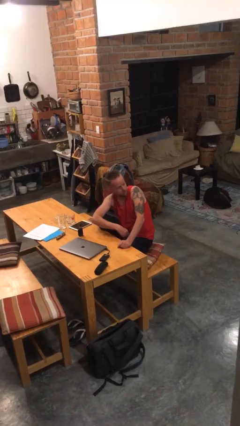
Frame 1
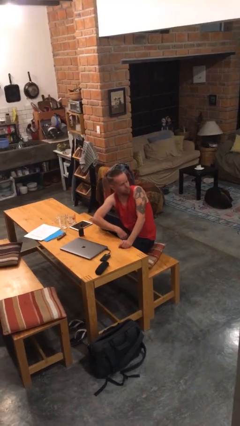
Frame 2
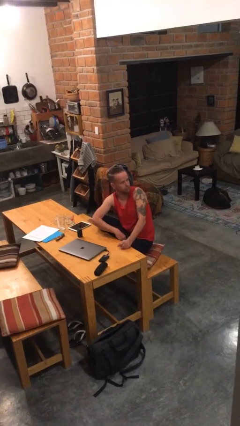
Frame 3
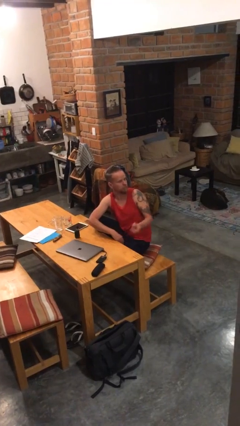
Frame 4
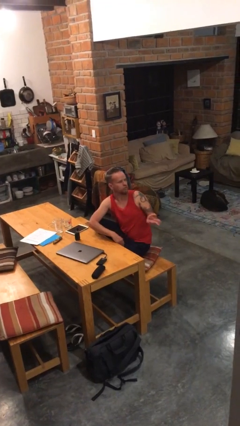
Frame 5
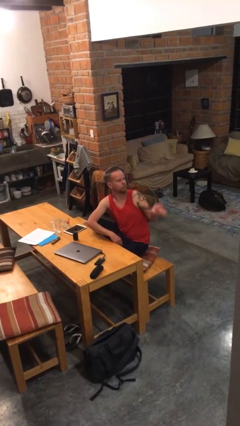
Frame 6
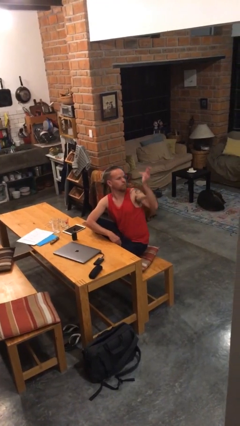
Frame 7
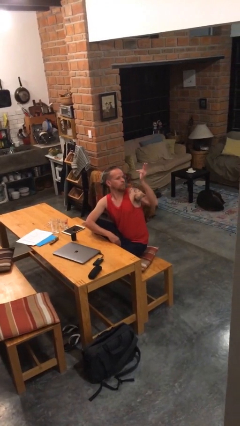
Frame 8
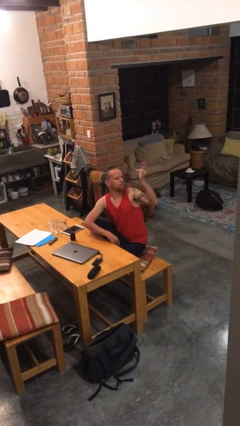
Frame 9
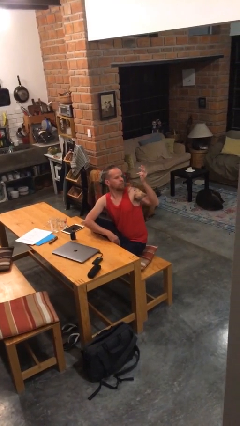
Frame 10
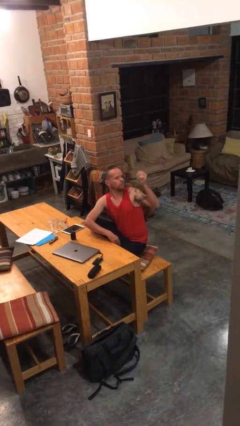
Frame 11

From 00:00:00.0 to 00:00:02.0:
person gestures swipe up

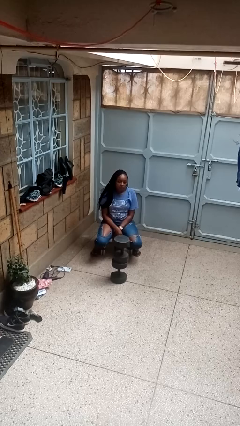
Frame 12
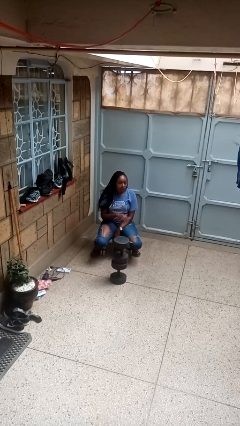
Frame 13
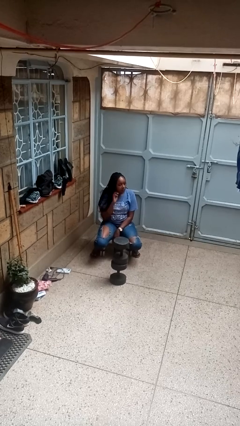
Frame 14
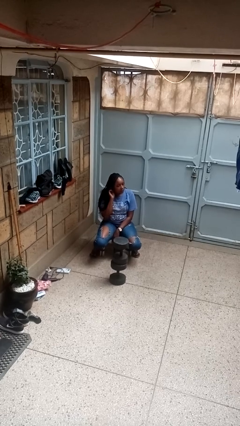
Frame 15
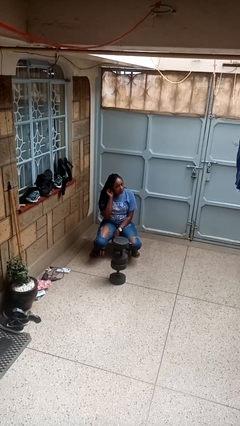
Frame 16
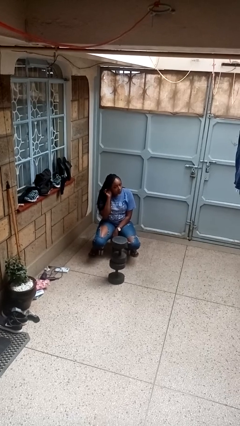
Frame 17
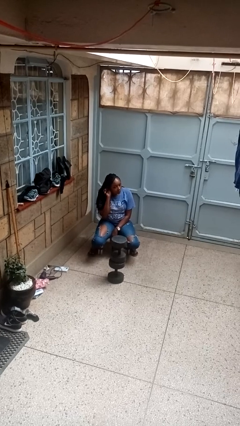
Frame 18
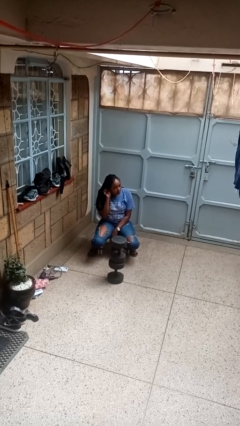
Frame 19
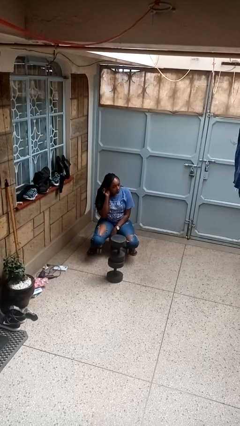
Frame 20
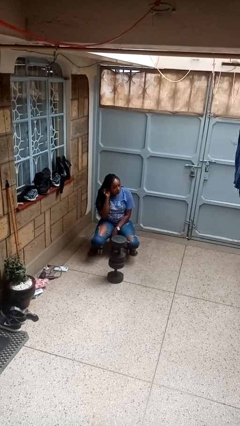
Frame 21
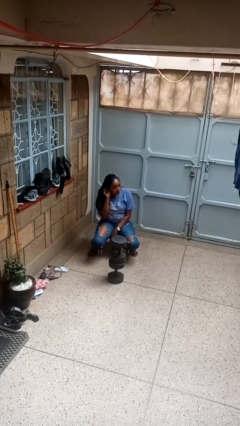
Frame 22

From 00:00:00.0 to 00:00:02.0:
person gestures listen closely

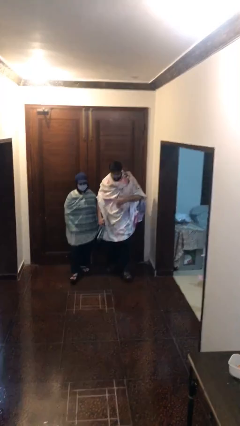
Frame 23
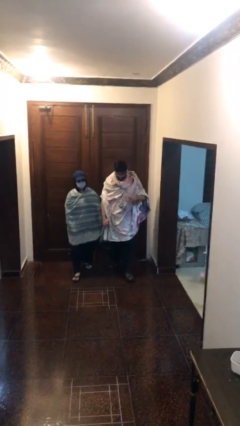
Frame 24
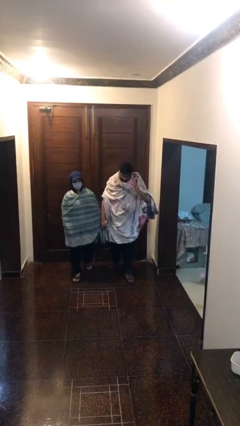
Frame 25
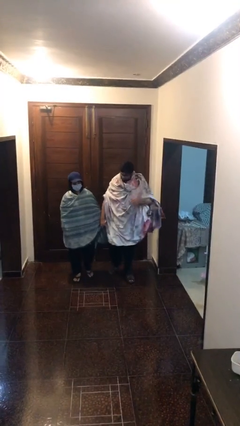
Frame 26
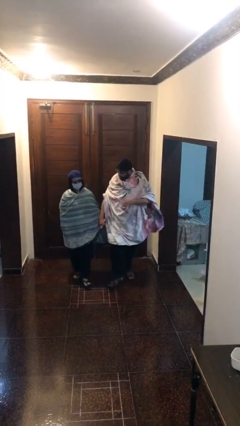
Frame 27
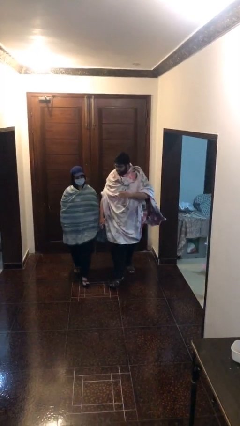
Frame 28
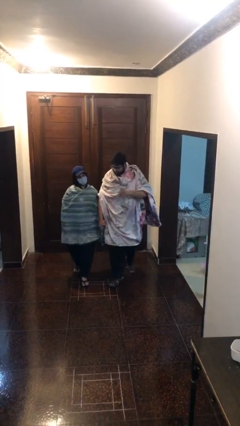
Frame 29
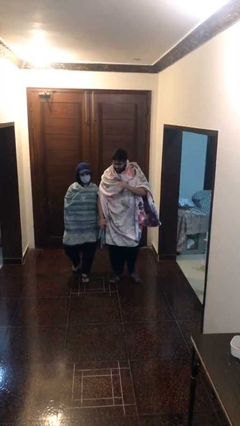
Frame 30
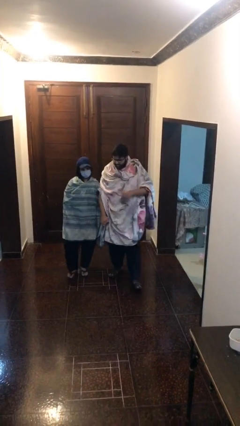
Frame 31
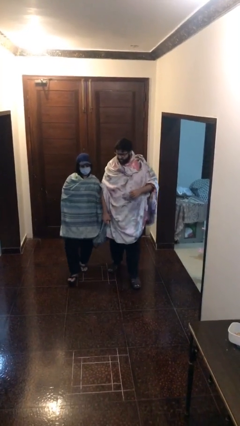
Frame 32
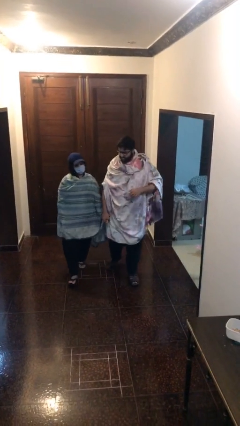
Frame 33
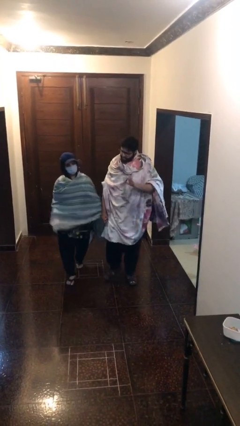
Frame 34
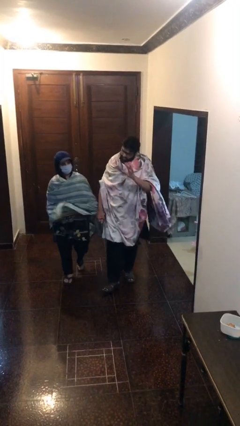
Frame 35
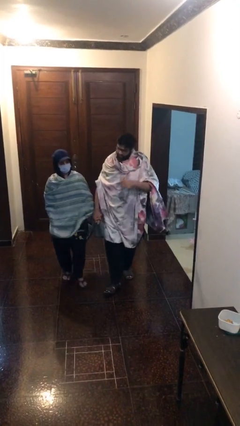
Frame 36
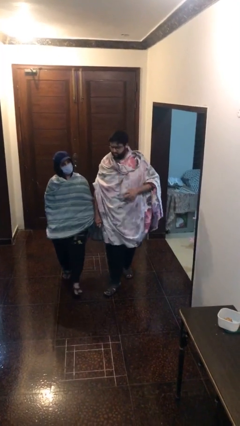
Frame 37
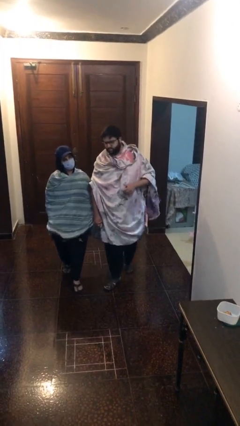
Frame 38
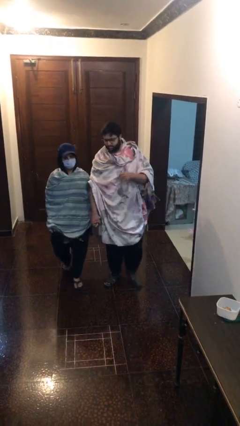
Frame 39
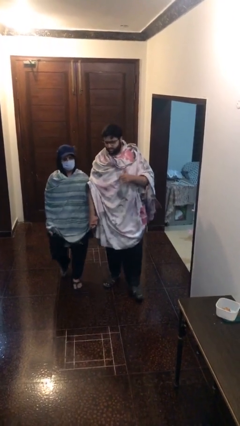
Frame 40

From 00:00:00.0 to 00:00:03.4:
person holds hand

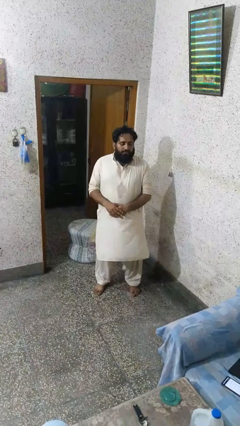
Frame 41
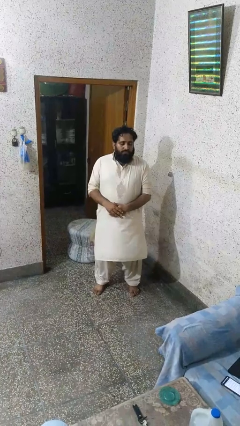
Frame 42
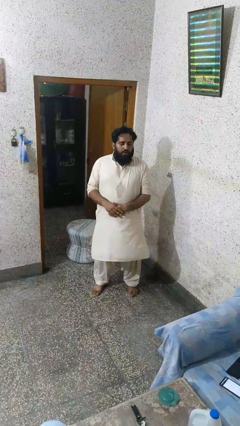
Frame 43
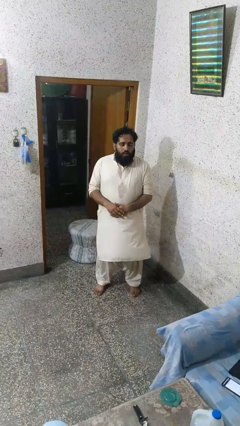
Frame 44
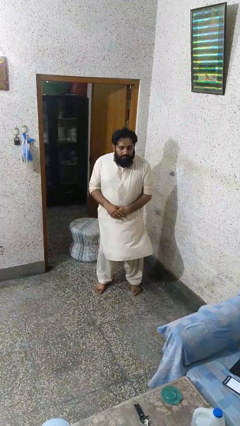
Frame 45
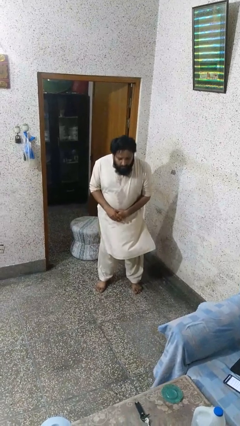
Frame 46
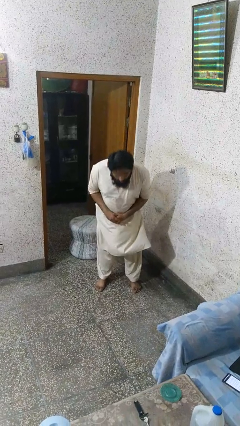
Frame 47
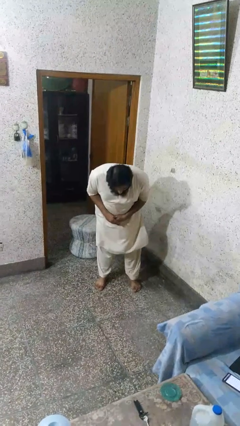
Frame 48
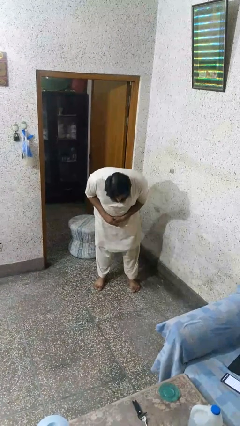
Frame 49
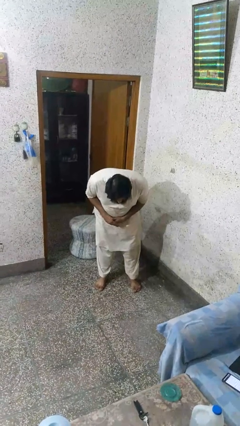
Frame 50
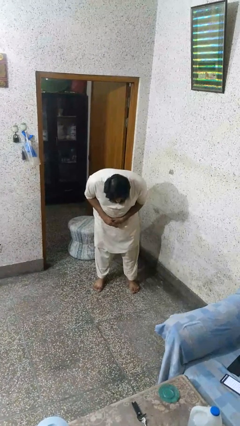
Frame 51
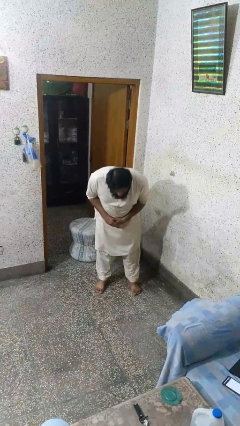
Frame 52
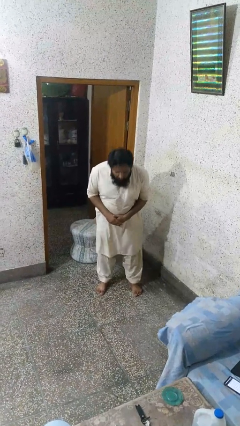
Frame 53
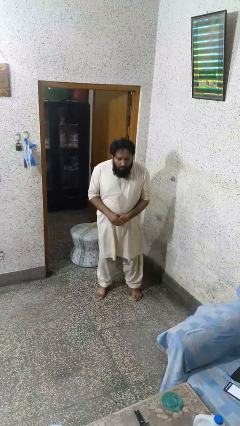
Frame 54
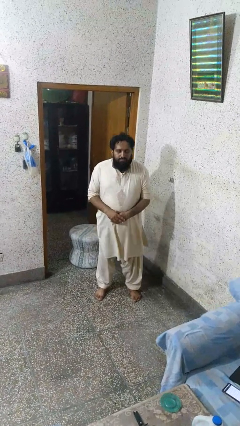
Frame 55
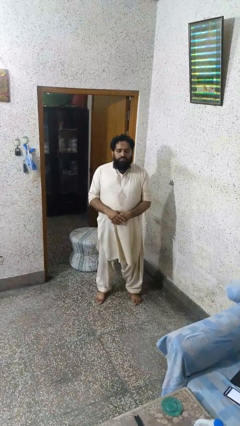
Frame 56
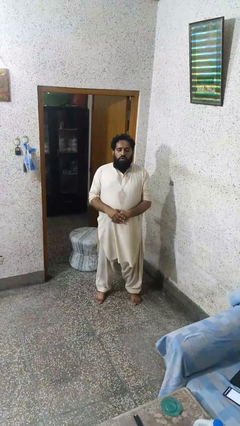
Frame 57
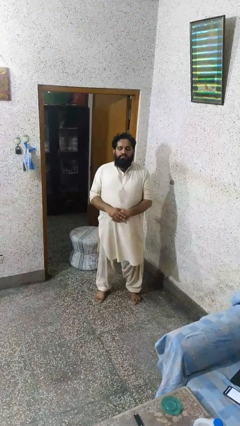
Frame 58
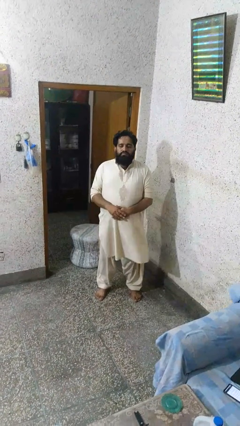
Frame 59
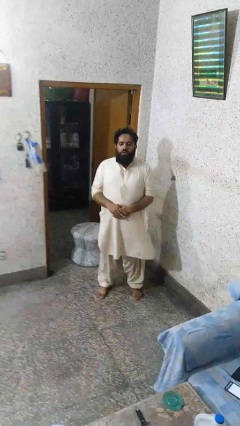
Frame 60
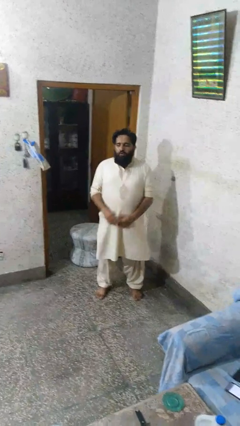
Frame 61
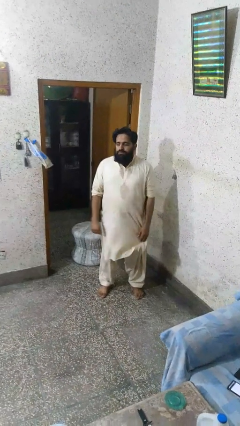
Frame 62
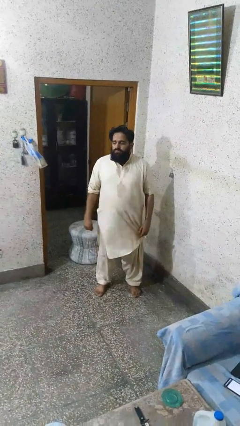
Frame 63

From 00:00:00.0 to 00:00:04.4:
person bows

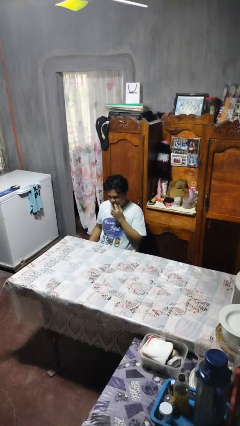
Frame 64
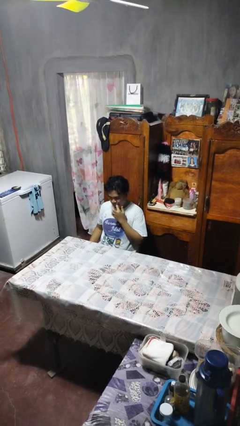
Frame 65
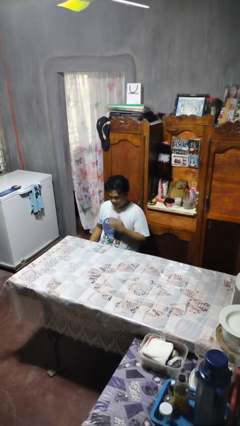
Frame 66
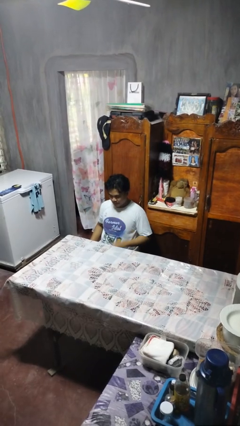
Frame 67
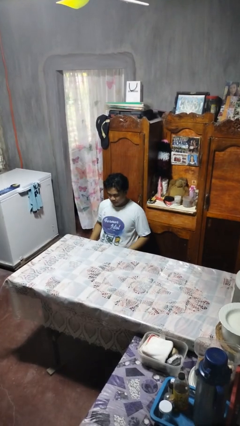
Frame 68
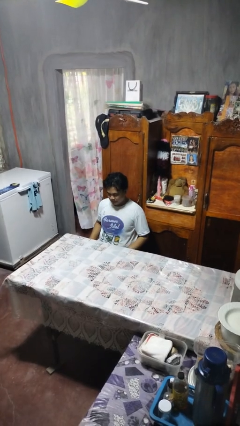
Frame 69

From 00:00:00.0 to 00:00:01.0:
person licks fingers

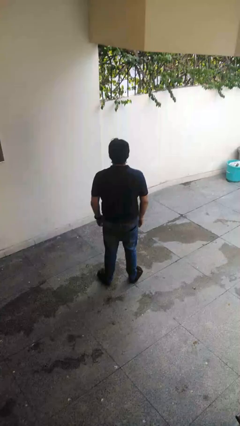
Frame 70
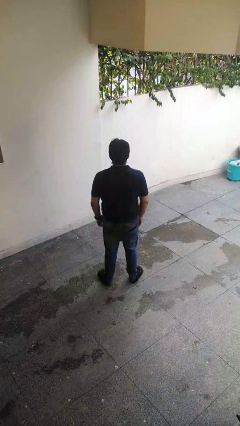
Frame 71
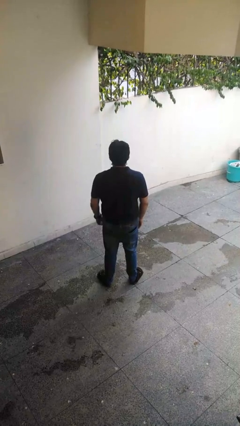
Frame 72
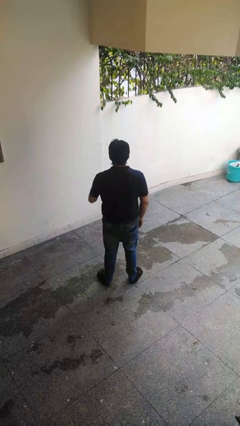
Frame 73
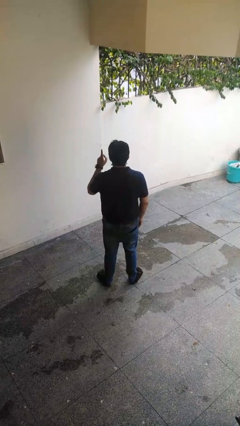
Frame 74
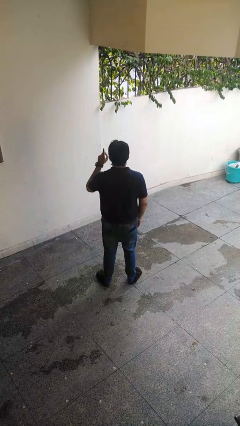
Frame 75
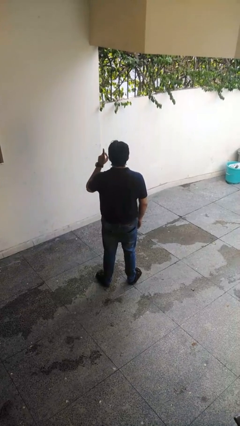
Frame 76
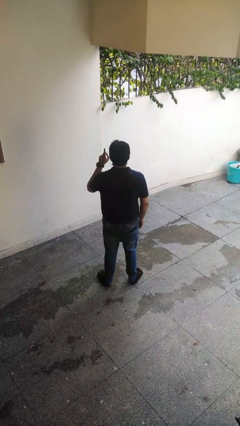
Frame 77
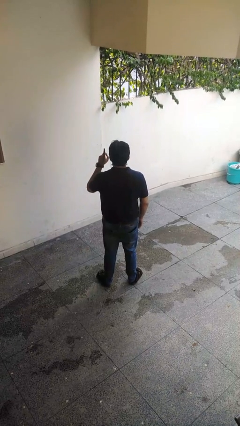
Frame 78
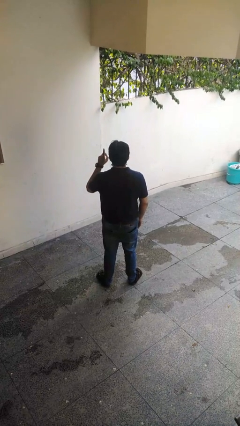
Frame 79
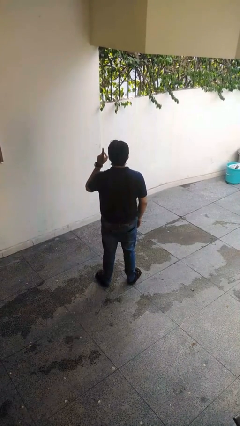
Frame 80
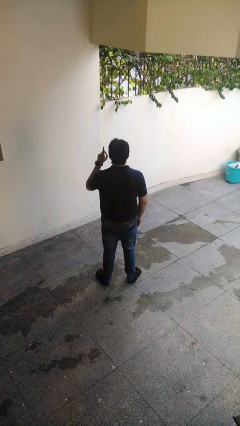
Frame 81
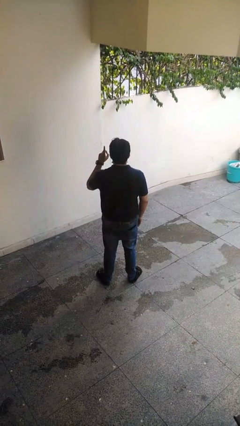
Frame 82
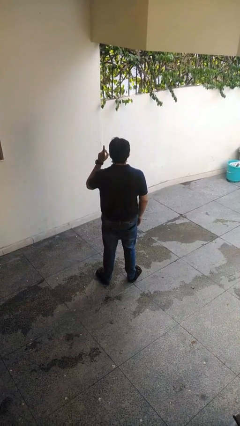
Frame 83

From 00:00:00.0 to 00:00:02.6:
person gestures number one

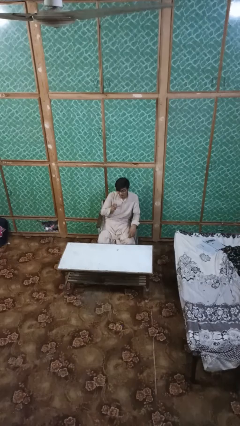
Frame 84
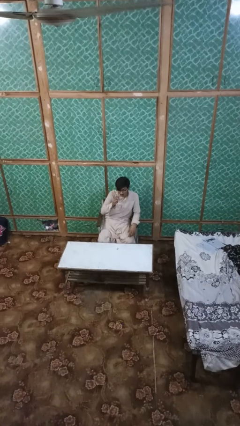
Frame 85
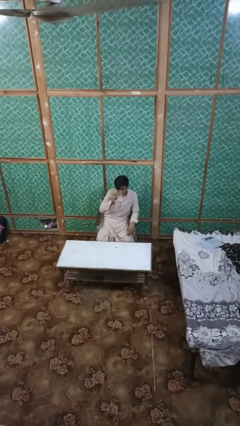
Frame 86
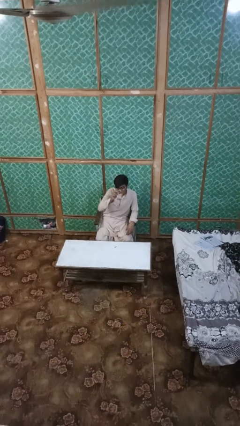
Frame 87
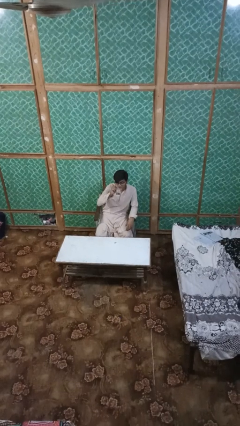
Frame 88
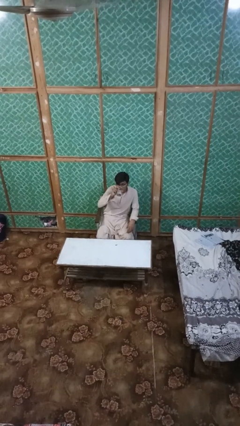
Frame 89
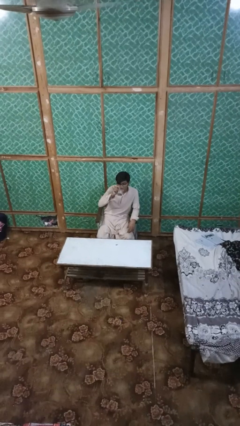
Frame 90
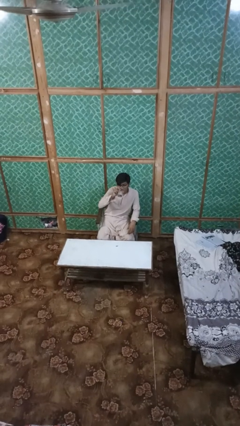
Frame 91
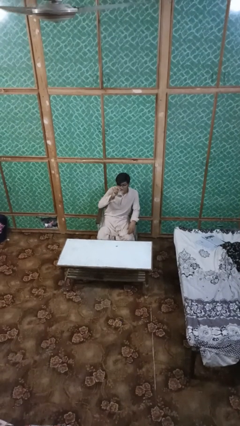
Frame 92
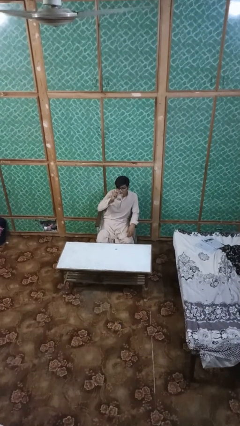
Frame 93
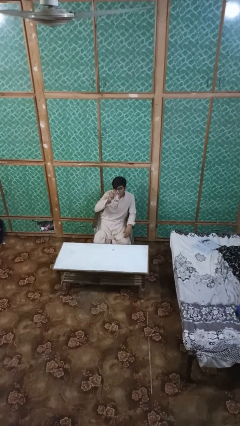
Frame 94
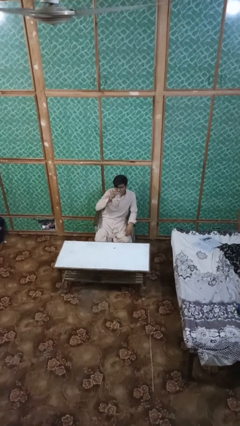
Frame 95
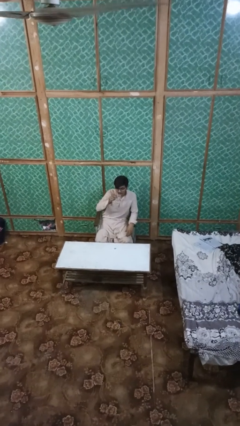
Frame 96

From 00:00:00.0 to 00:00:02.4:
person drinks from shotglass
